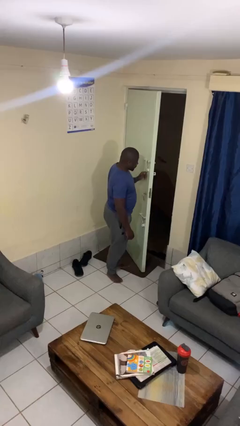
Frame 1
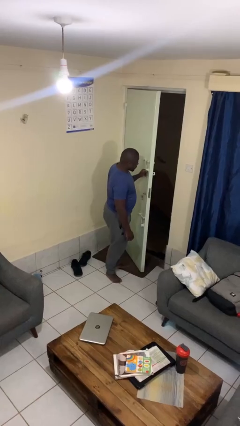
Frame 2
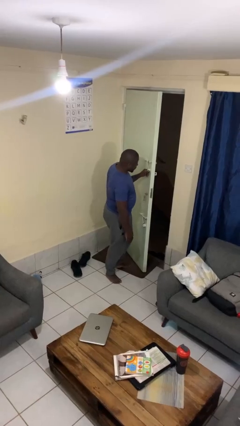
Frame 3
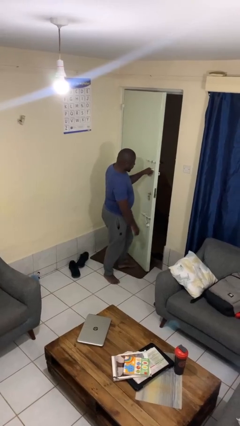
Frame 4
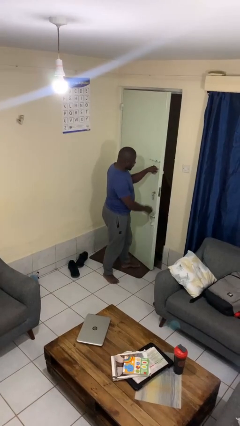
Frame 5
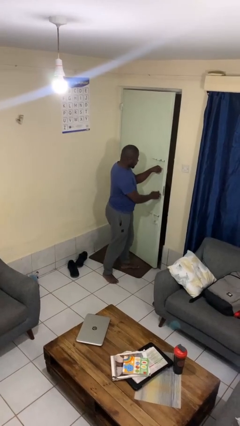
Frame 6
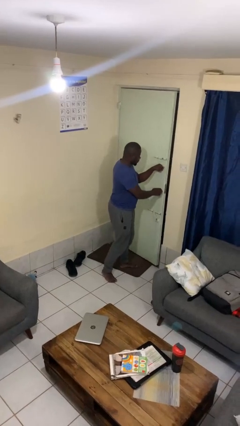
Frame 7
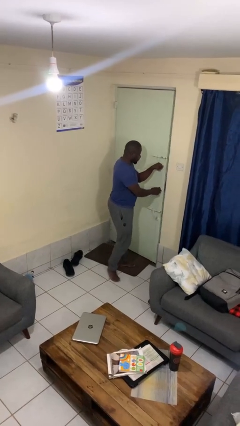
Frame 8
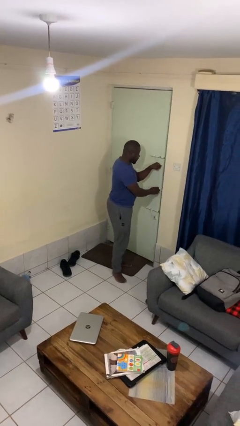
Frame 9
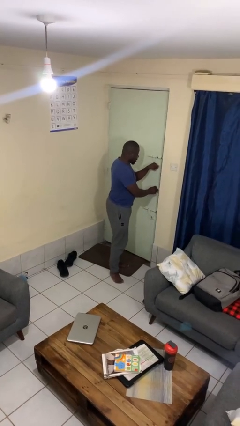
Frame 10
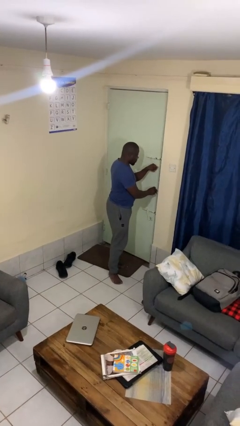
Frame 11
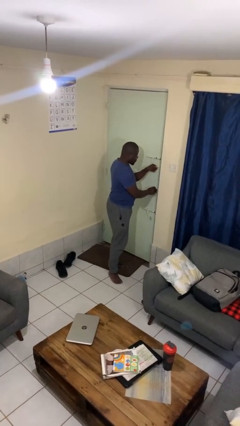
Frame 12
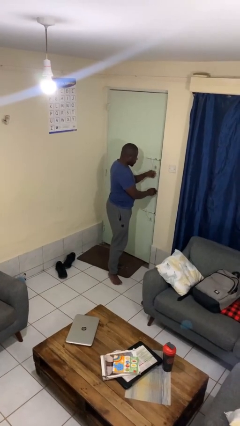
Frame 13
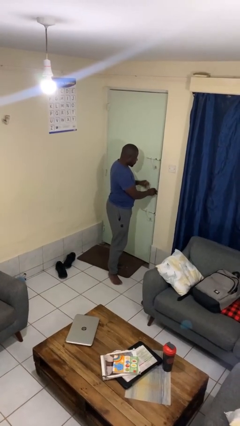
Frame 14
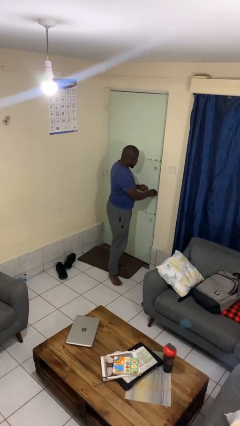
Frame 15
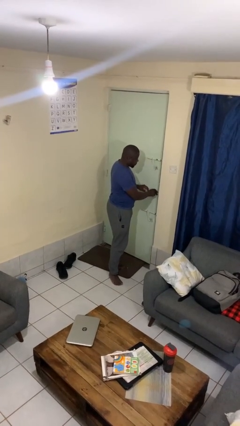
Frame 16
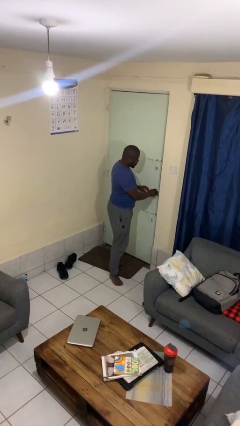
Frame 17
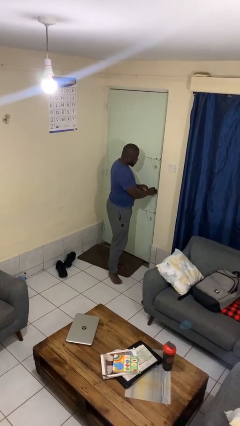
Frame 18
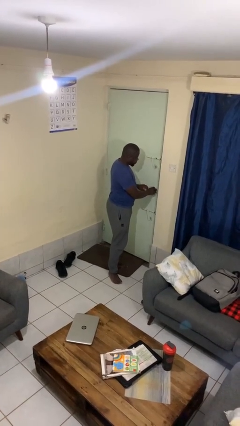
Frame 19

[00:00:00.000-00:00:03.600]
person closes facility door

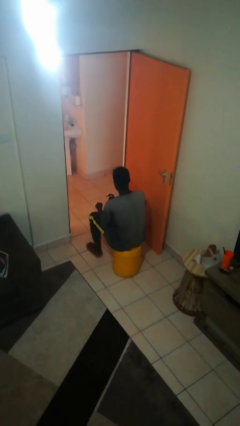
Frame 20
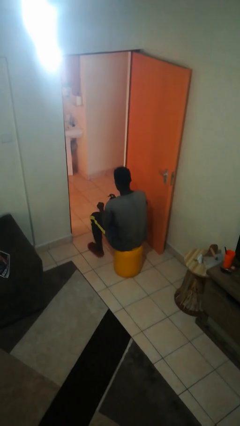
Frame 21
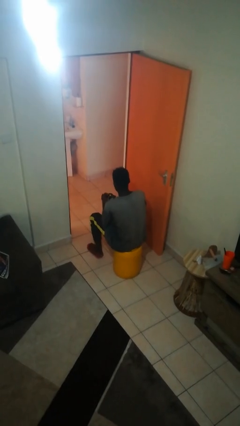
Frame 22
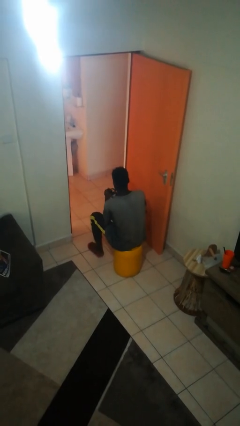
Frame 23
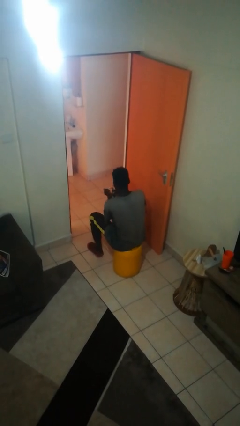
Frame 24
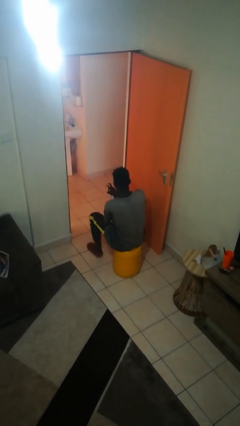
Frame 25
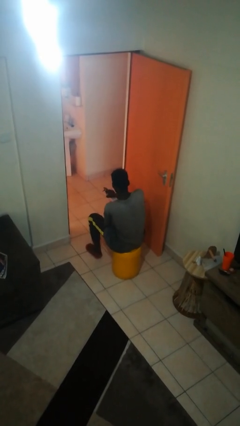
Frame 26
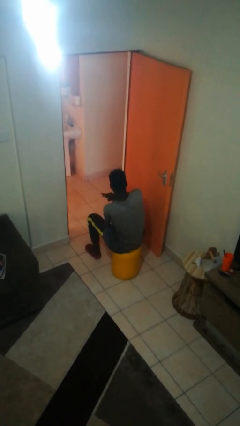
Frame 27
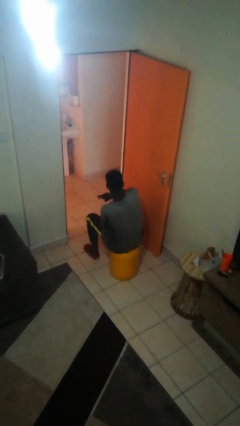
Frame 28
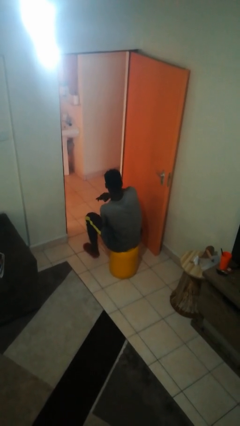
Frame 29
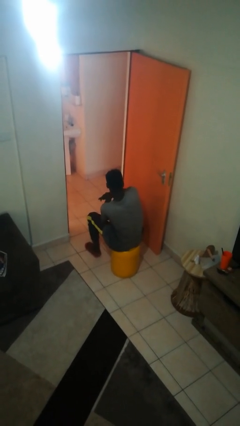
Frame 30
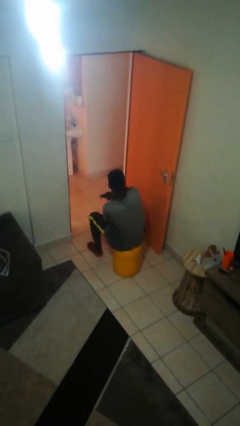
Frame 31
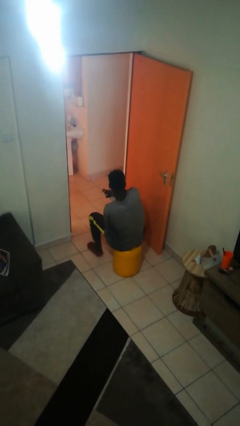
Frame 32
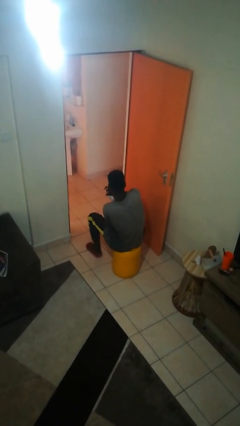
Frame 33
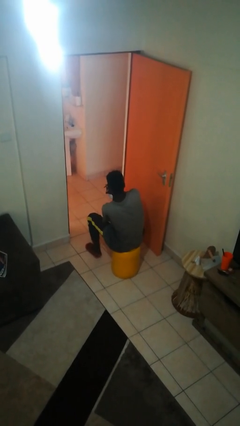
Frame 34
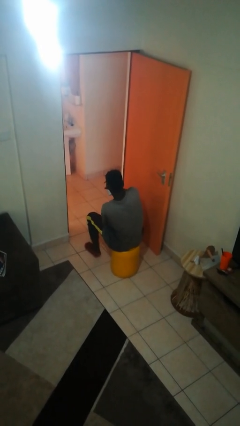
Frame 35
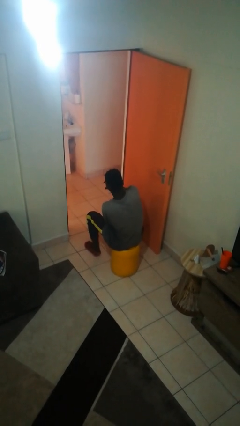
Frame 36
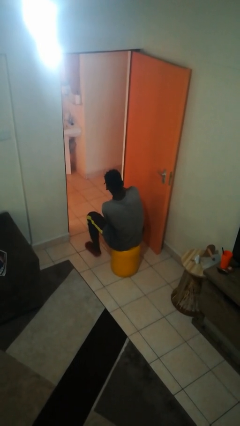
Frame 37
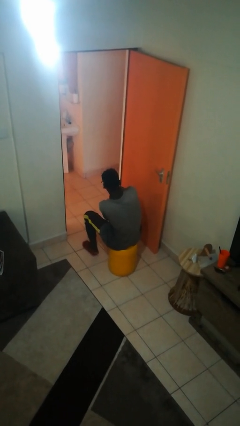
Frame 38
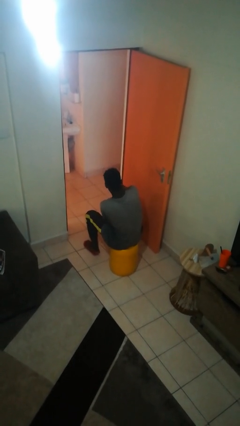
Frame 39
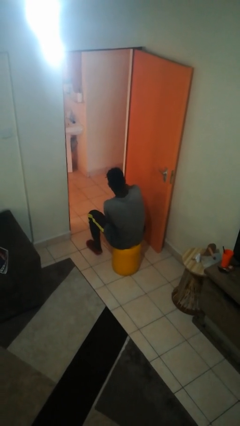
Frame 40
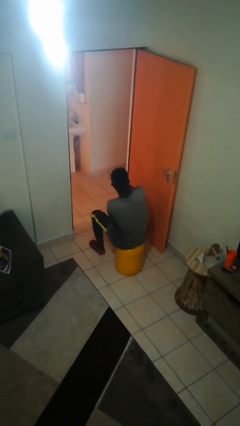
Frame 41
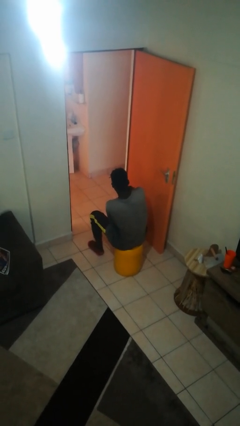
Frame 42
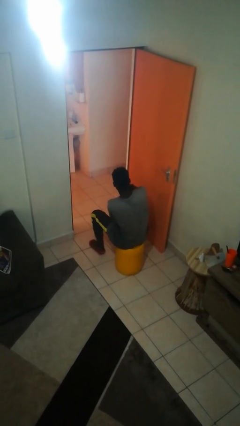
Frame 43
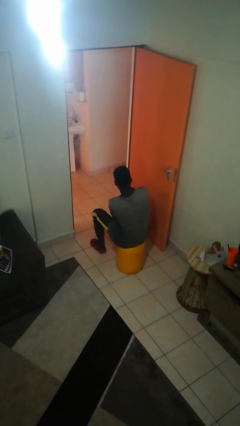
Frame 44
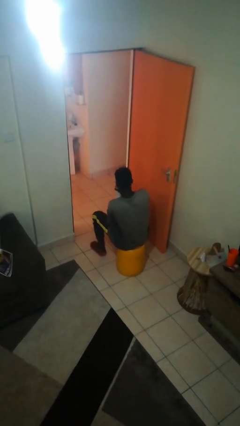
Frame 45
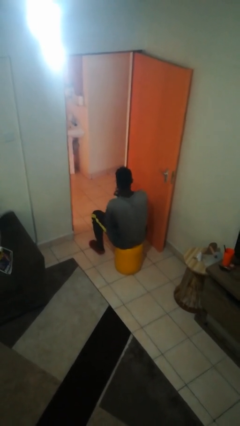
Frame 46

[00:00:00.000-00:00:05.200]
person applies sunscreen

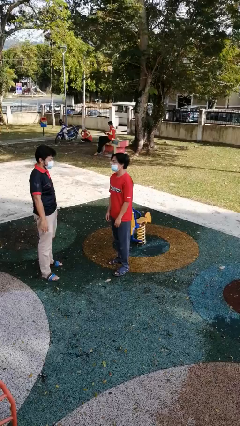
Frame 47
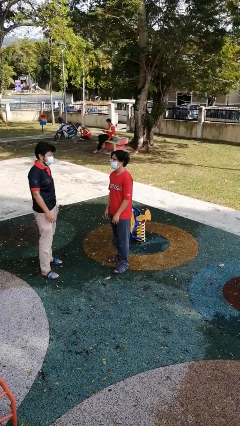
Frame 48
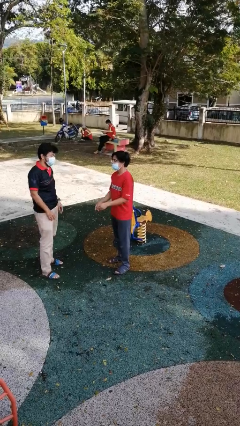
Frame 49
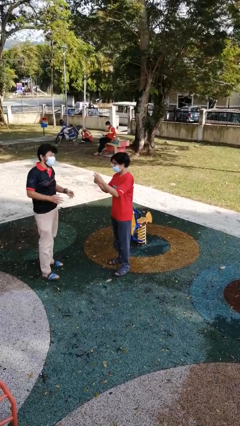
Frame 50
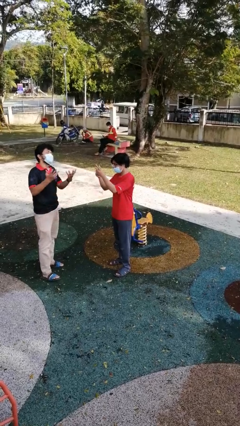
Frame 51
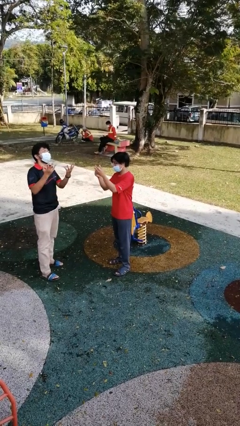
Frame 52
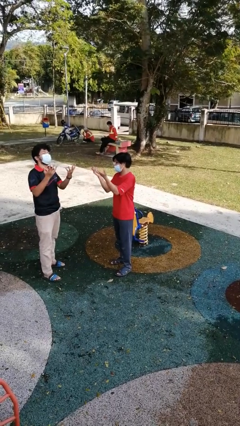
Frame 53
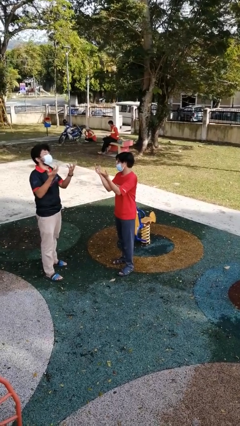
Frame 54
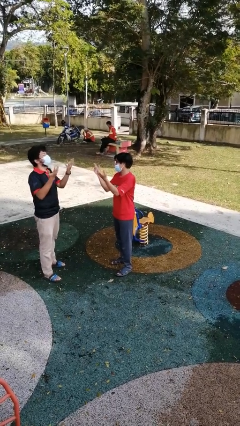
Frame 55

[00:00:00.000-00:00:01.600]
person talks to person

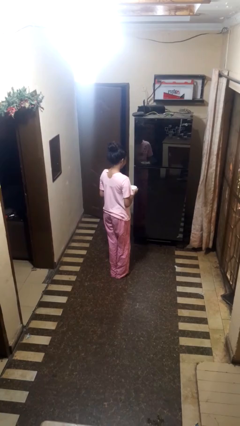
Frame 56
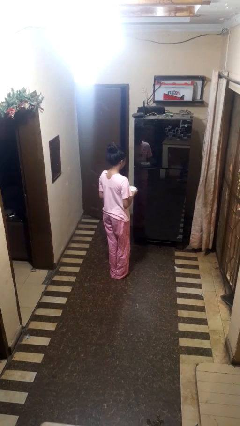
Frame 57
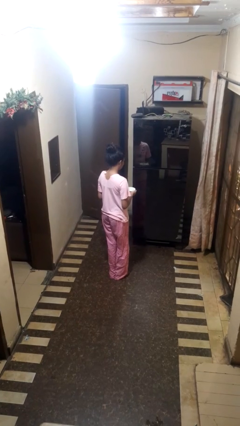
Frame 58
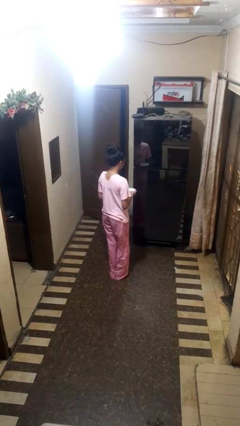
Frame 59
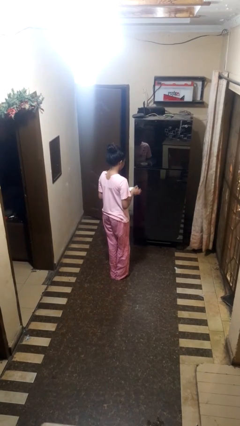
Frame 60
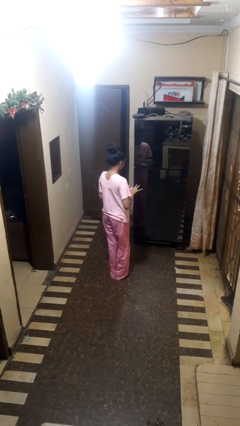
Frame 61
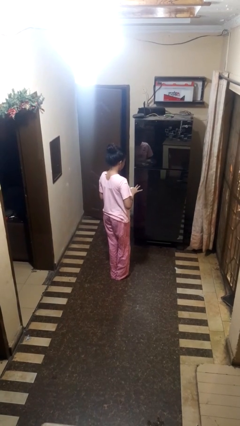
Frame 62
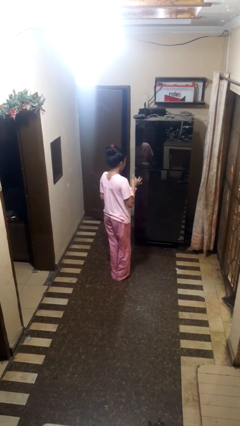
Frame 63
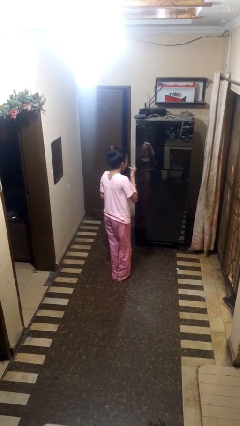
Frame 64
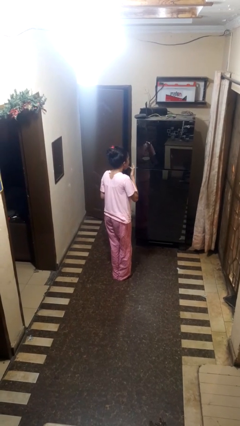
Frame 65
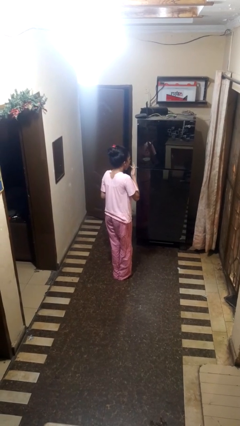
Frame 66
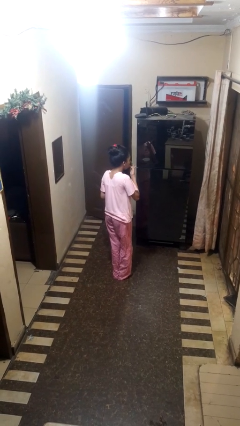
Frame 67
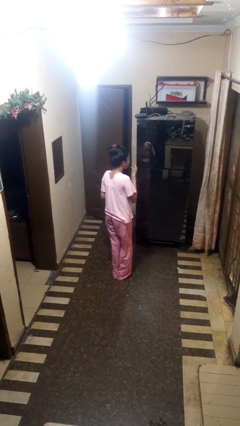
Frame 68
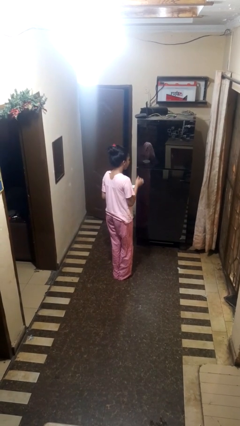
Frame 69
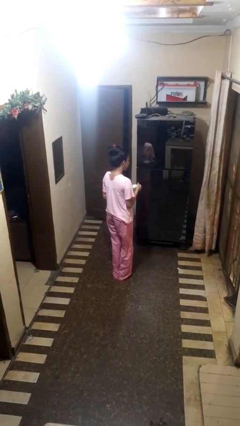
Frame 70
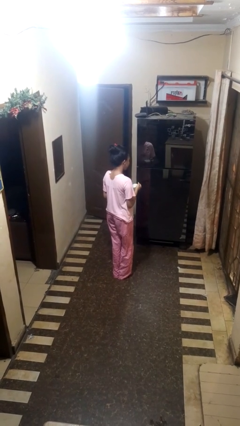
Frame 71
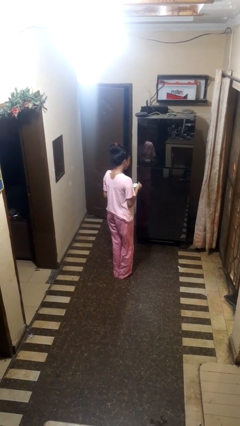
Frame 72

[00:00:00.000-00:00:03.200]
person licks fingers

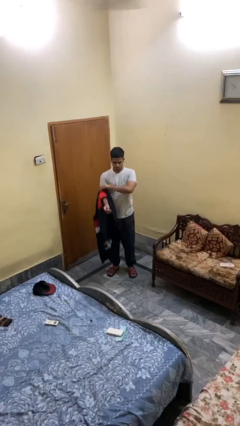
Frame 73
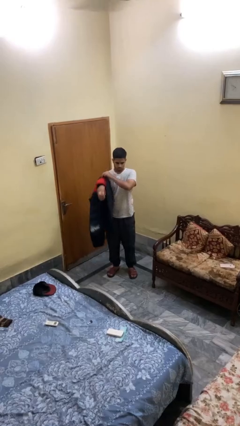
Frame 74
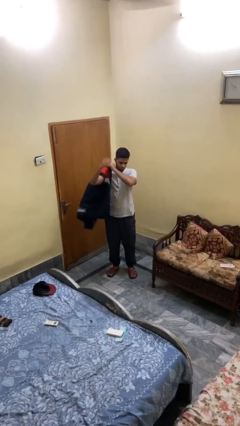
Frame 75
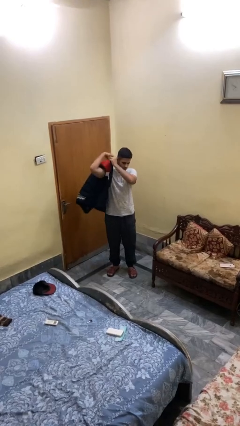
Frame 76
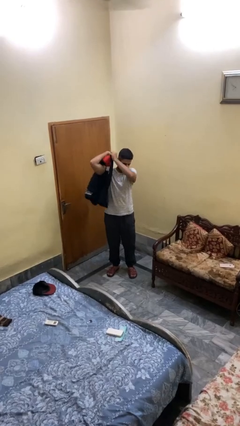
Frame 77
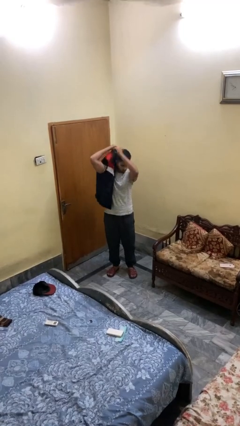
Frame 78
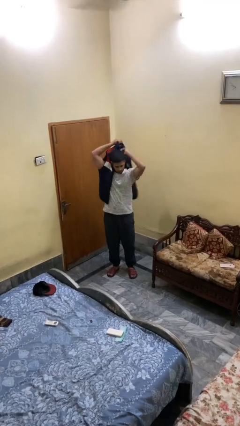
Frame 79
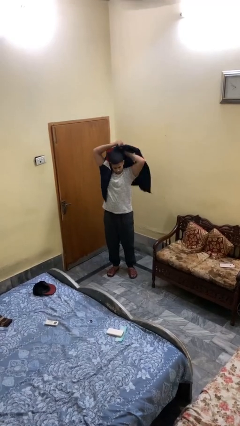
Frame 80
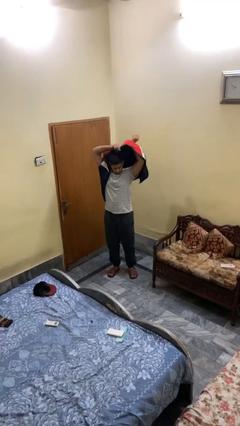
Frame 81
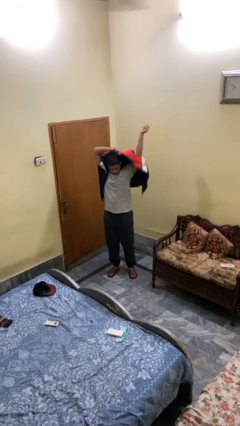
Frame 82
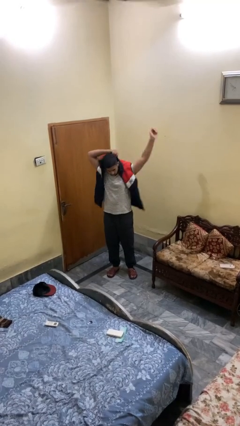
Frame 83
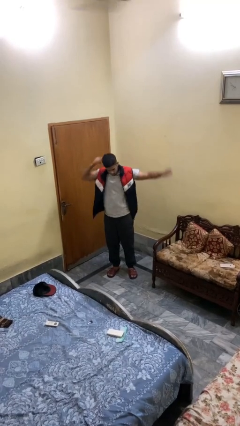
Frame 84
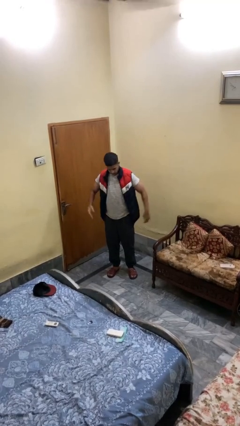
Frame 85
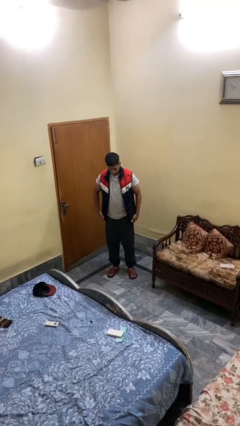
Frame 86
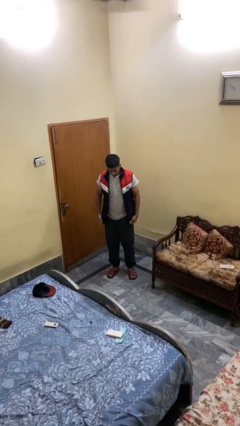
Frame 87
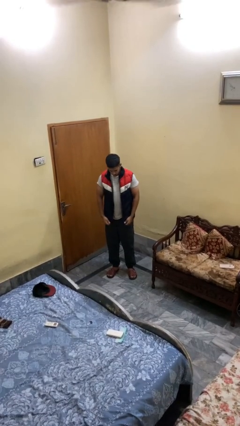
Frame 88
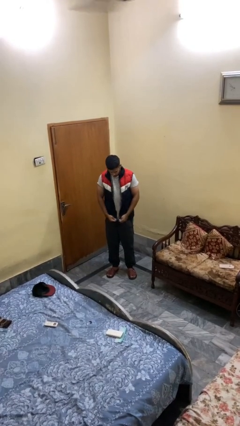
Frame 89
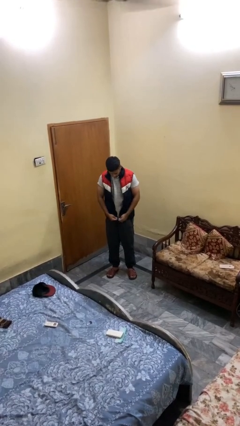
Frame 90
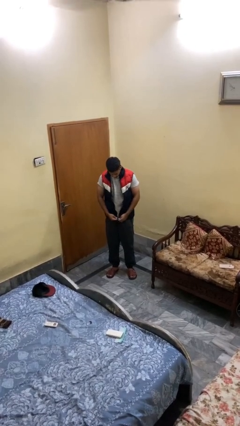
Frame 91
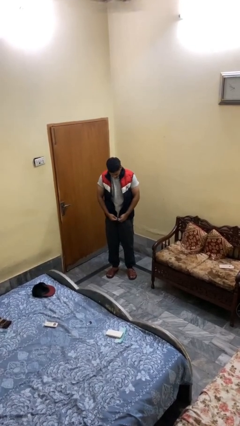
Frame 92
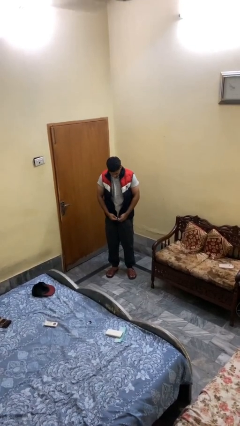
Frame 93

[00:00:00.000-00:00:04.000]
person puts on jacket
